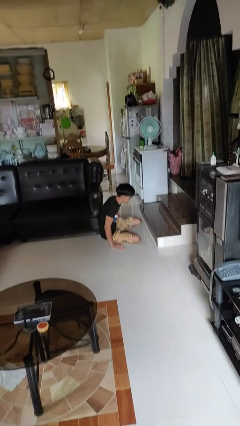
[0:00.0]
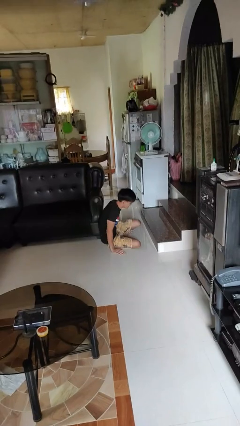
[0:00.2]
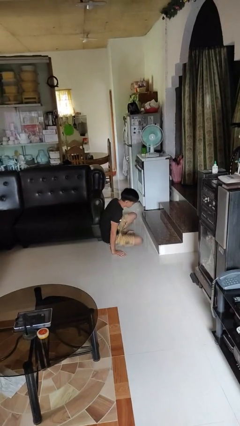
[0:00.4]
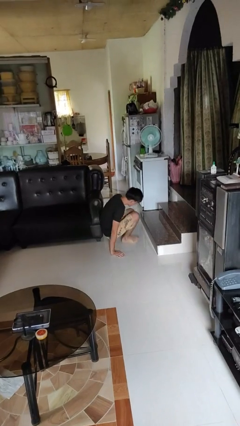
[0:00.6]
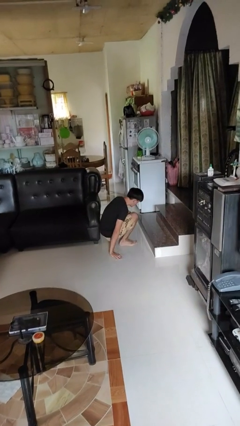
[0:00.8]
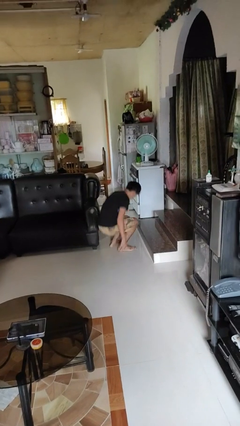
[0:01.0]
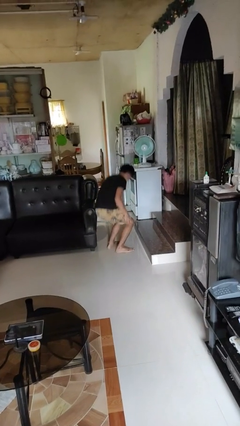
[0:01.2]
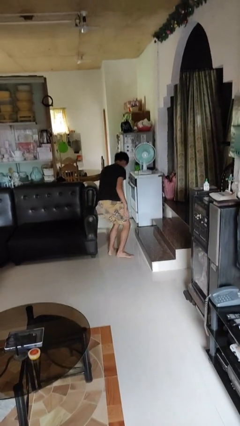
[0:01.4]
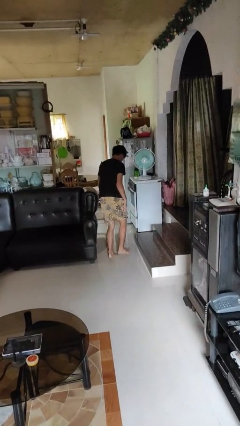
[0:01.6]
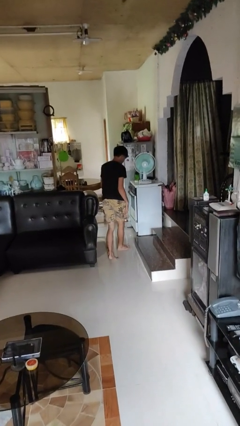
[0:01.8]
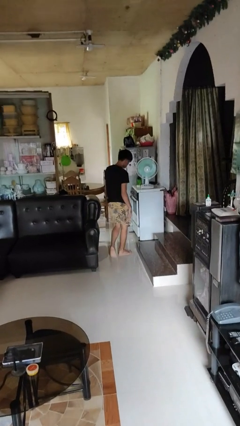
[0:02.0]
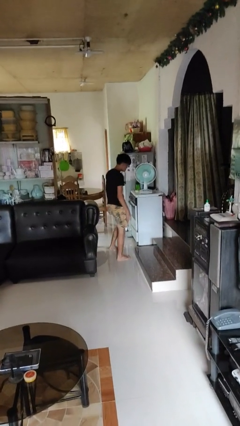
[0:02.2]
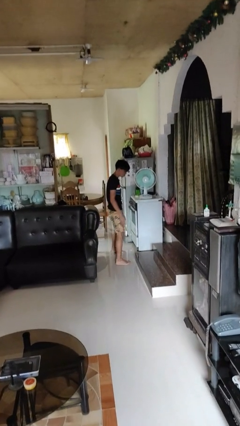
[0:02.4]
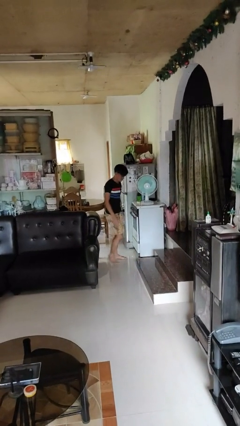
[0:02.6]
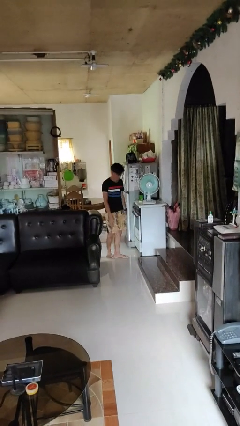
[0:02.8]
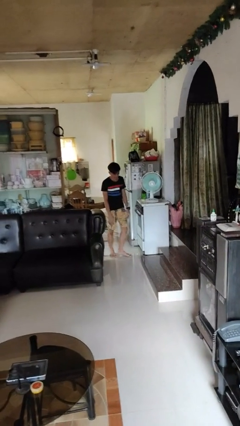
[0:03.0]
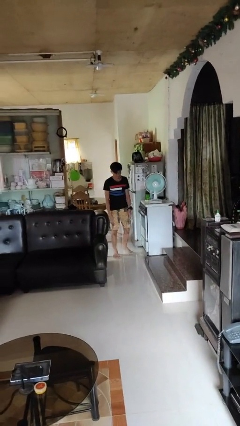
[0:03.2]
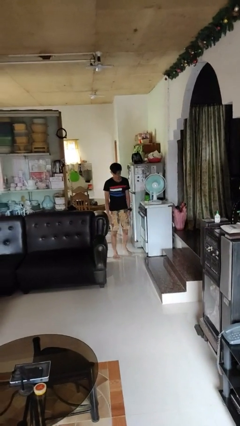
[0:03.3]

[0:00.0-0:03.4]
person stands up from floor

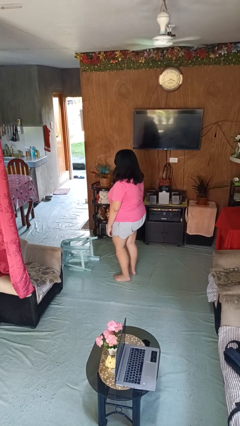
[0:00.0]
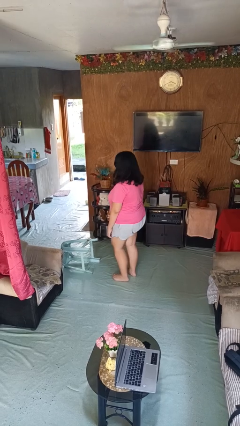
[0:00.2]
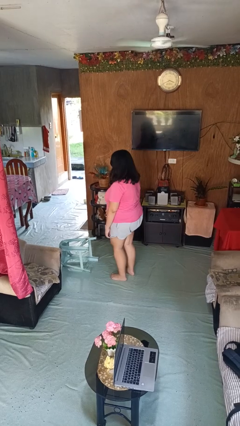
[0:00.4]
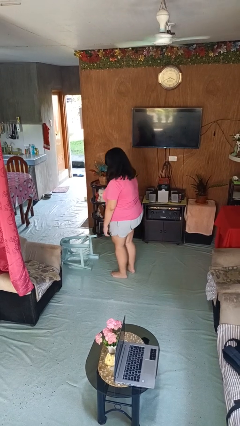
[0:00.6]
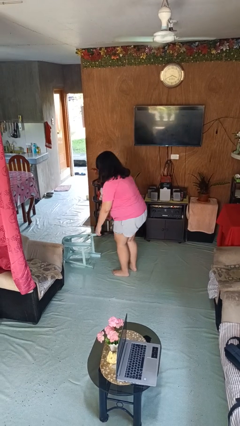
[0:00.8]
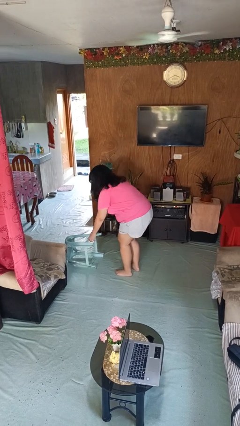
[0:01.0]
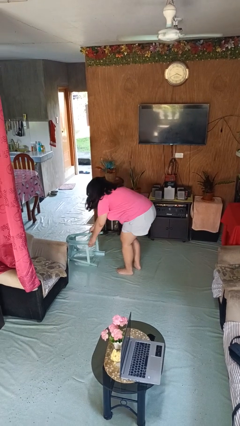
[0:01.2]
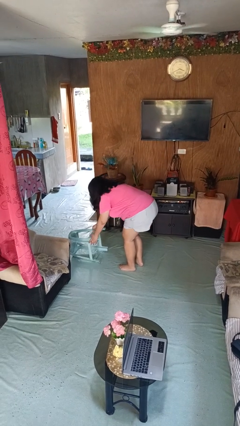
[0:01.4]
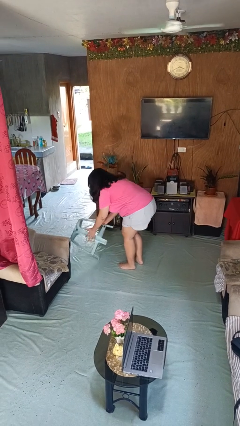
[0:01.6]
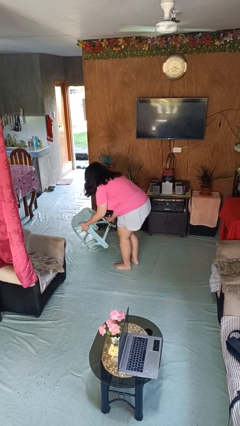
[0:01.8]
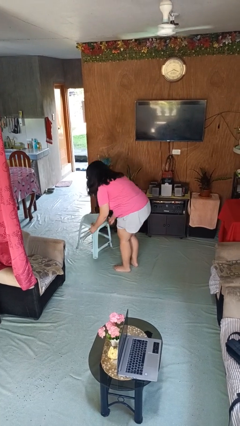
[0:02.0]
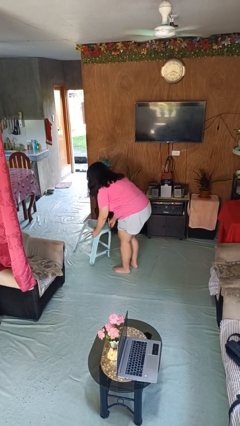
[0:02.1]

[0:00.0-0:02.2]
person sets upright furniture

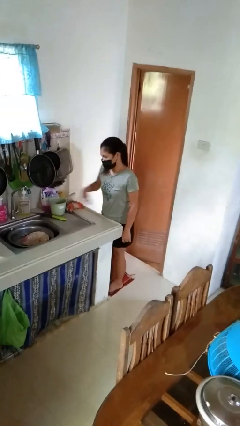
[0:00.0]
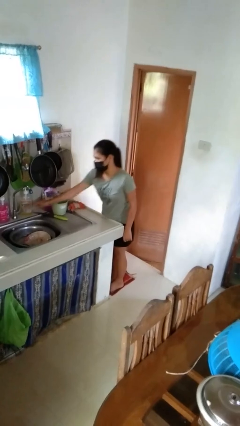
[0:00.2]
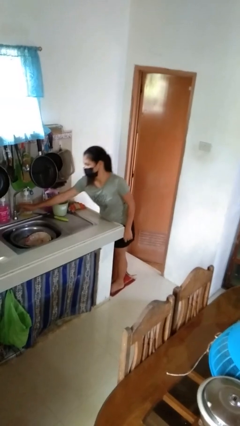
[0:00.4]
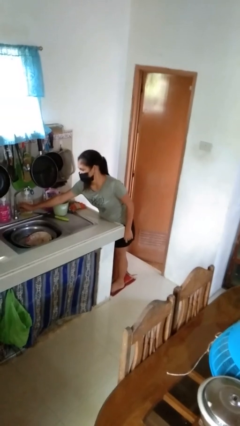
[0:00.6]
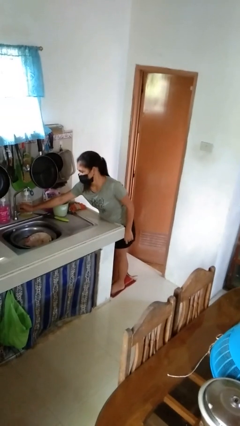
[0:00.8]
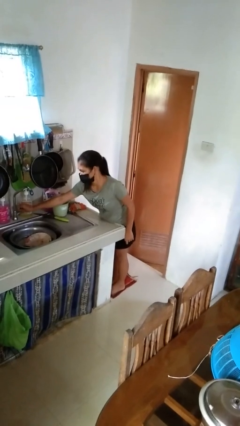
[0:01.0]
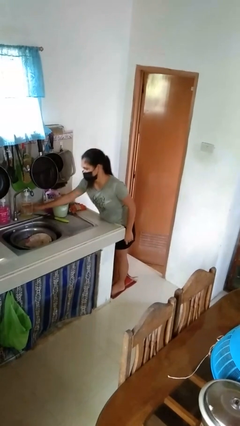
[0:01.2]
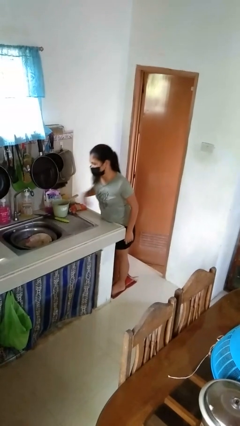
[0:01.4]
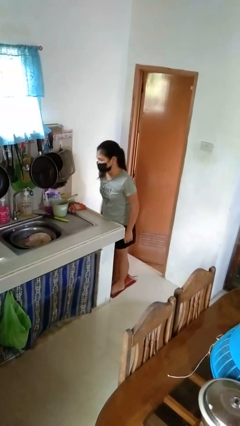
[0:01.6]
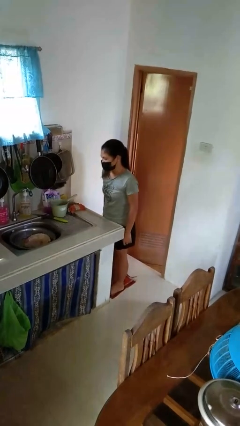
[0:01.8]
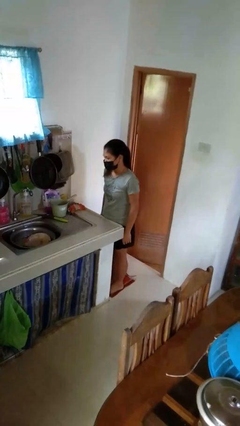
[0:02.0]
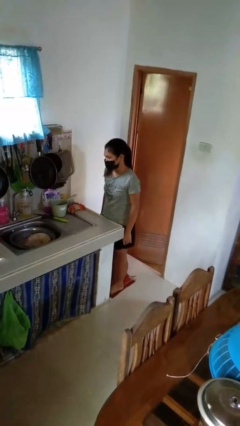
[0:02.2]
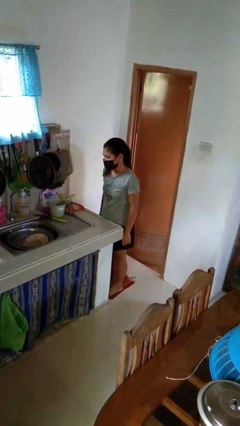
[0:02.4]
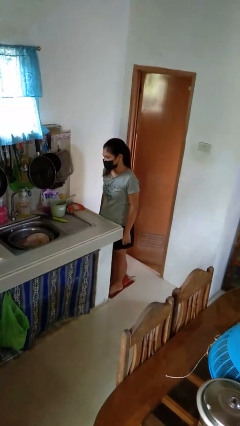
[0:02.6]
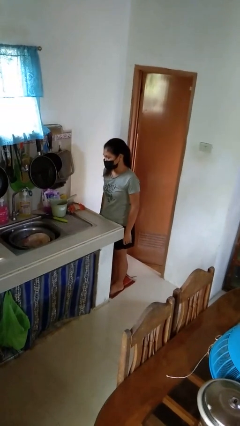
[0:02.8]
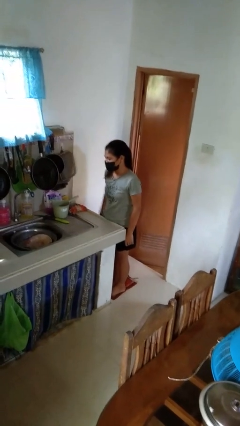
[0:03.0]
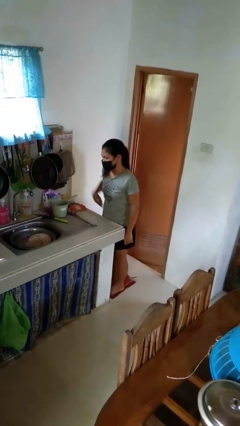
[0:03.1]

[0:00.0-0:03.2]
person turns on faucet

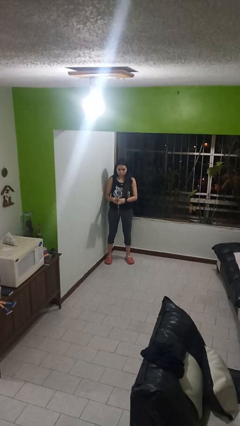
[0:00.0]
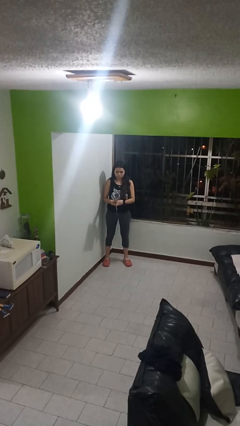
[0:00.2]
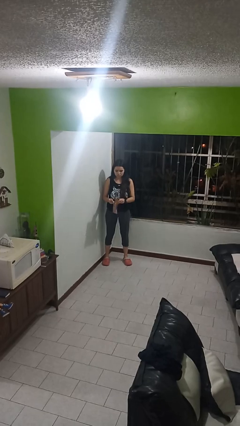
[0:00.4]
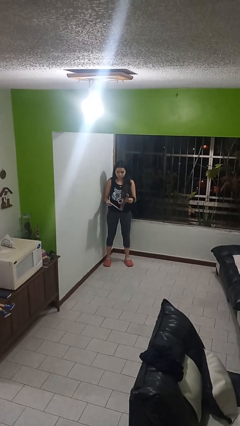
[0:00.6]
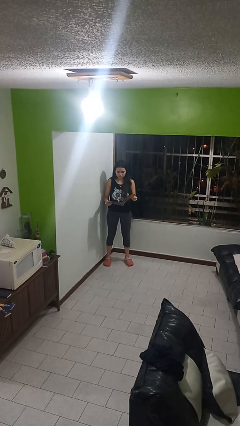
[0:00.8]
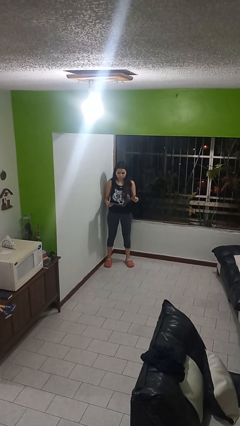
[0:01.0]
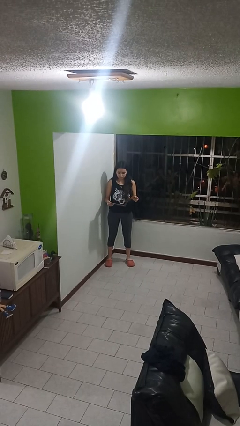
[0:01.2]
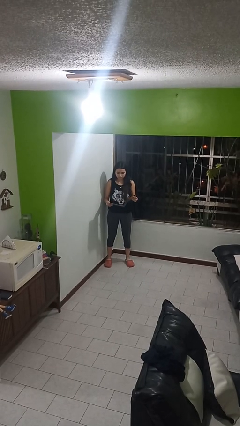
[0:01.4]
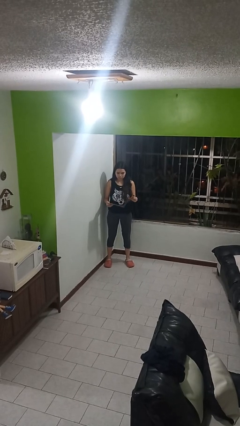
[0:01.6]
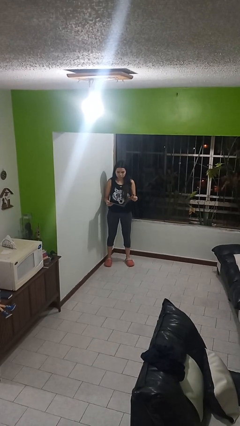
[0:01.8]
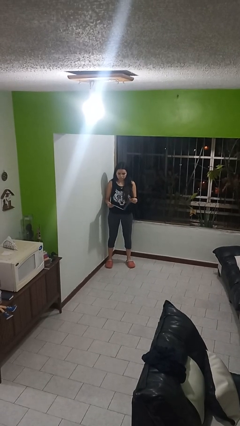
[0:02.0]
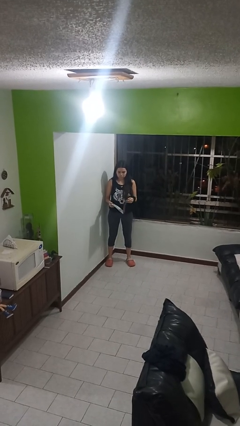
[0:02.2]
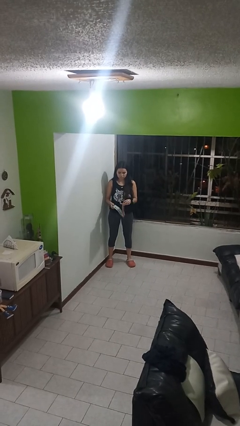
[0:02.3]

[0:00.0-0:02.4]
person reads magazine

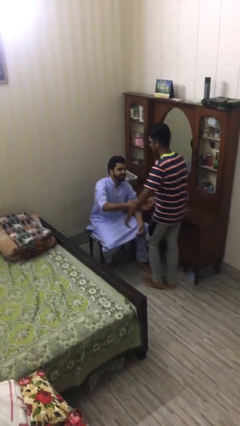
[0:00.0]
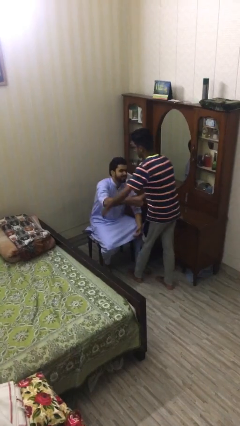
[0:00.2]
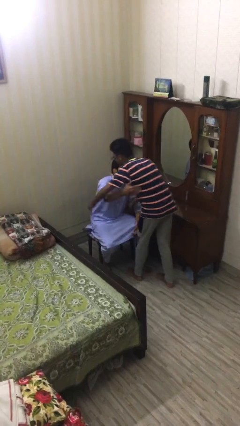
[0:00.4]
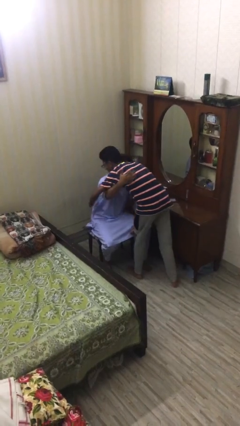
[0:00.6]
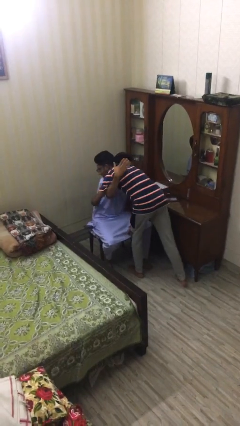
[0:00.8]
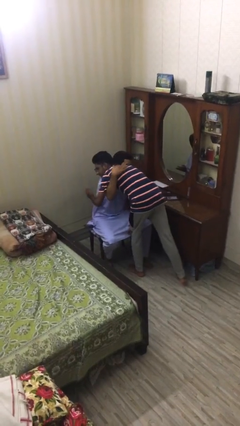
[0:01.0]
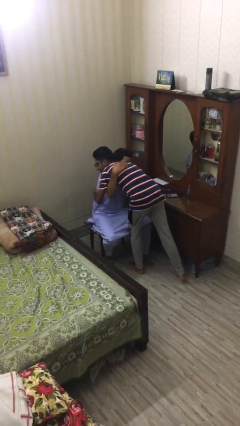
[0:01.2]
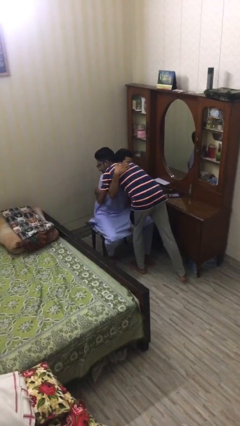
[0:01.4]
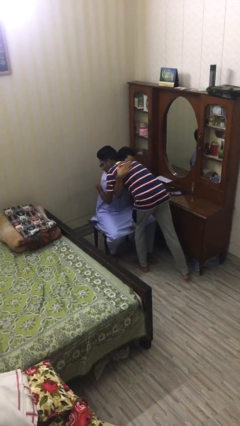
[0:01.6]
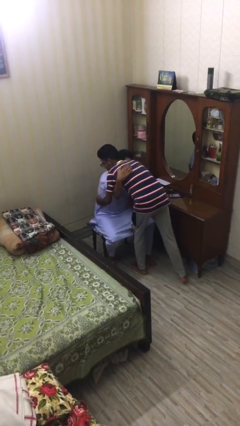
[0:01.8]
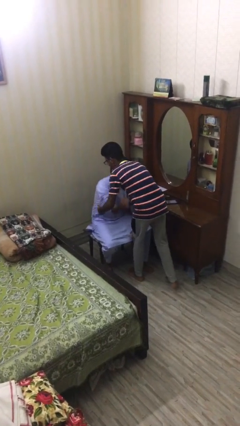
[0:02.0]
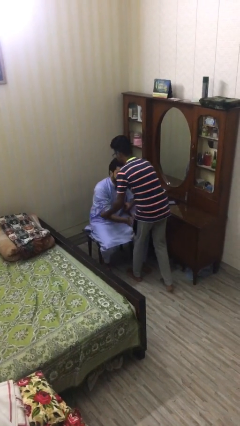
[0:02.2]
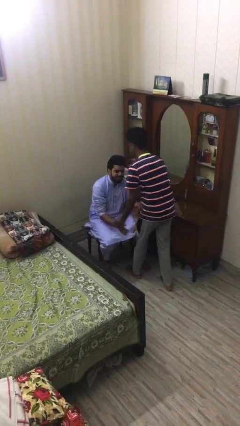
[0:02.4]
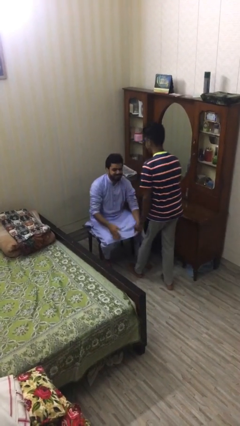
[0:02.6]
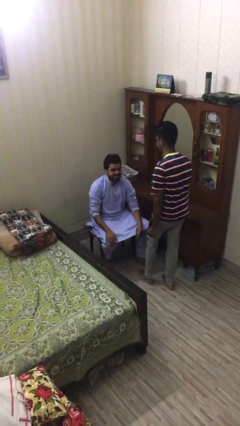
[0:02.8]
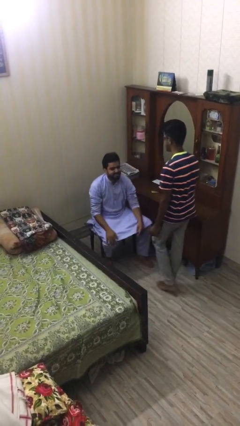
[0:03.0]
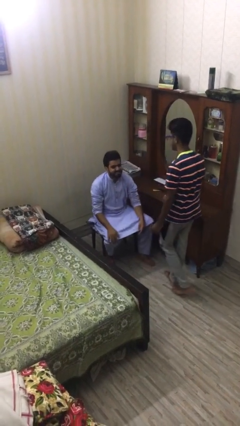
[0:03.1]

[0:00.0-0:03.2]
person embraces person

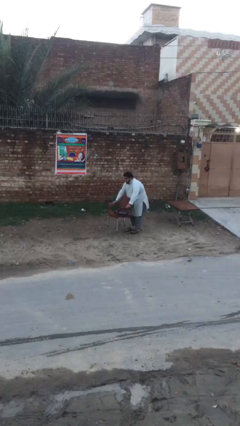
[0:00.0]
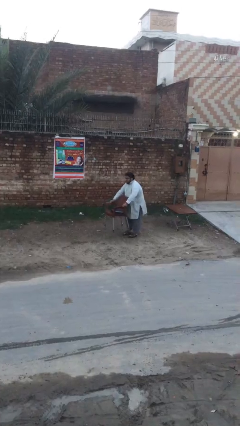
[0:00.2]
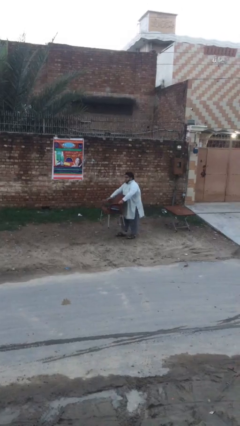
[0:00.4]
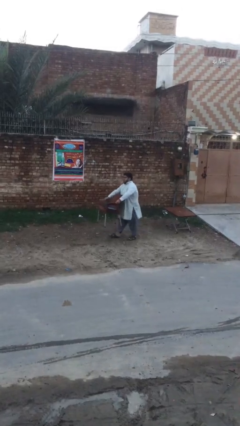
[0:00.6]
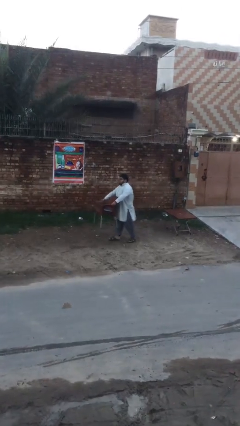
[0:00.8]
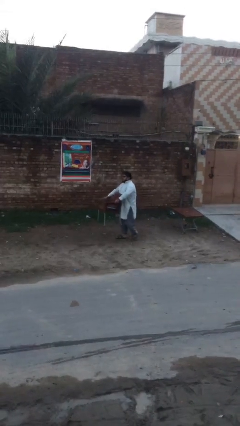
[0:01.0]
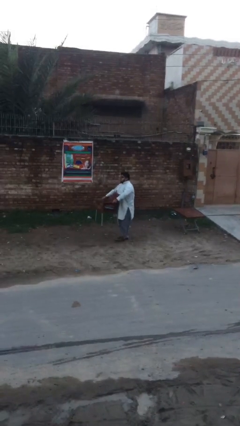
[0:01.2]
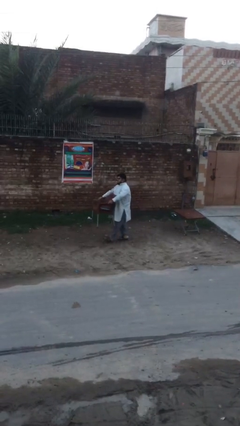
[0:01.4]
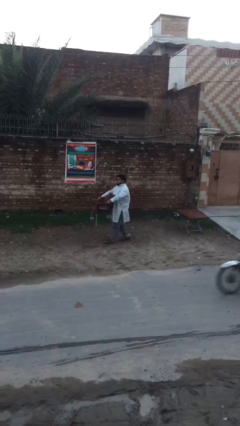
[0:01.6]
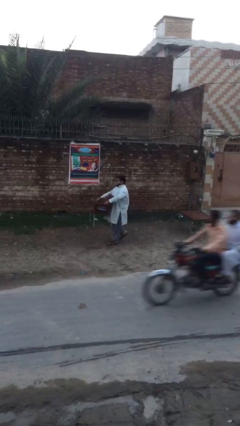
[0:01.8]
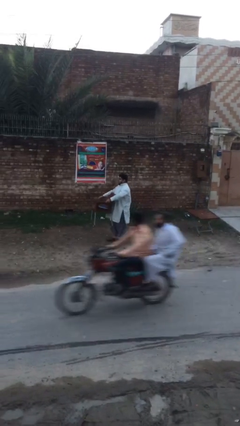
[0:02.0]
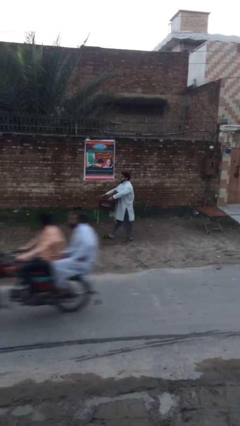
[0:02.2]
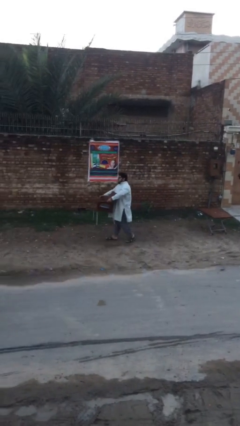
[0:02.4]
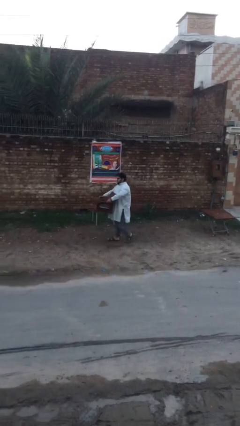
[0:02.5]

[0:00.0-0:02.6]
person carries heavy object
